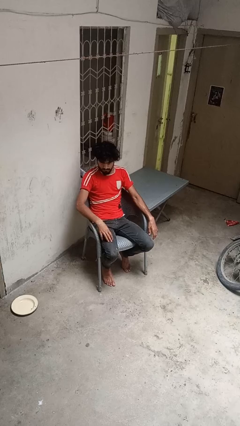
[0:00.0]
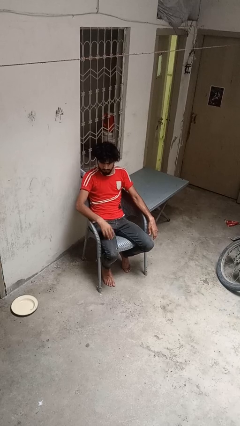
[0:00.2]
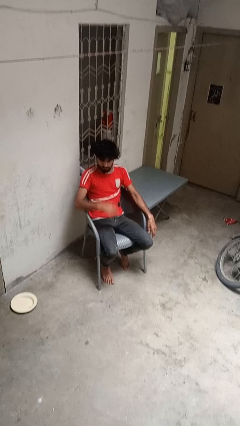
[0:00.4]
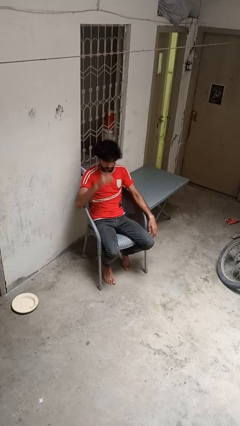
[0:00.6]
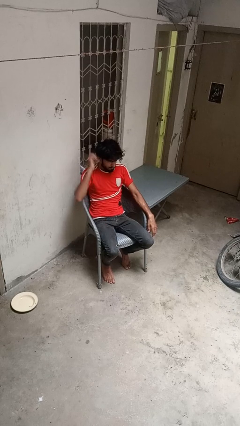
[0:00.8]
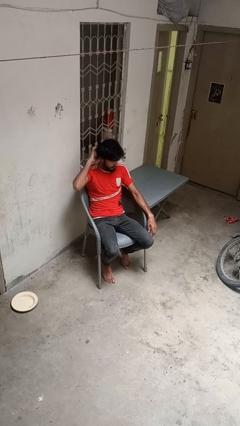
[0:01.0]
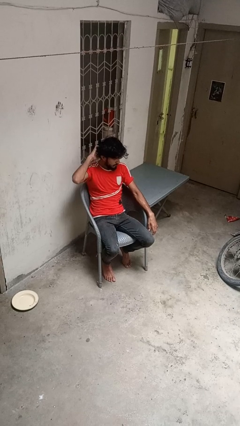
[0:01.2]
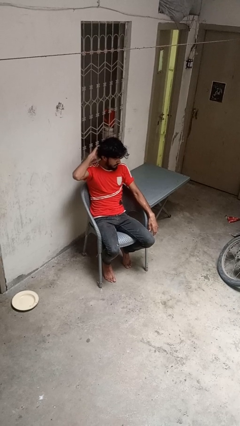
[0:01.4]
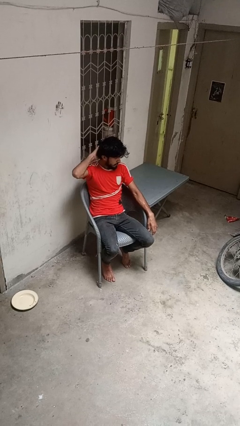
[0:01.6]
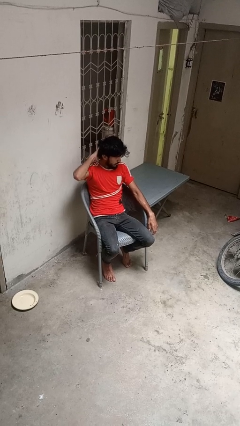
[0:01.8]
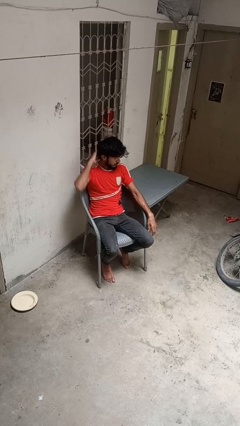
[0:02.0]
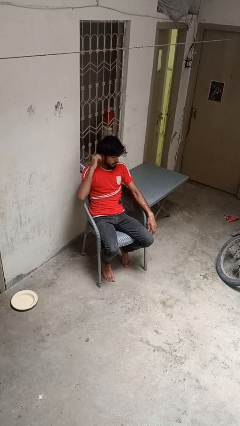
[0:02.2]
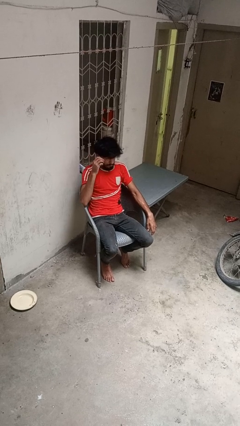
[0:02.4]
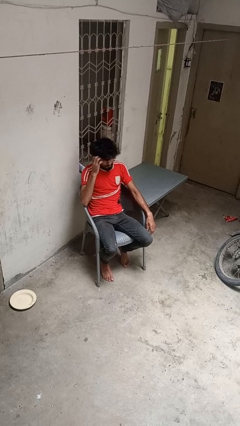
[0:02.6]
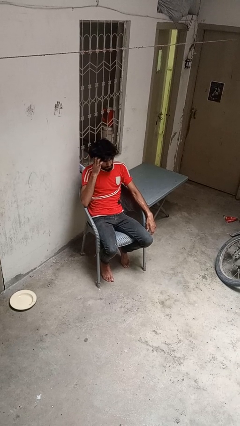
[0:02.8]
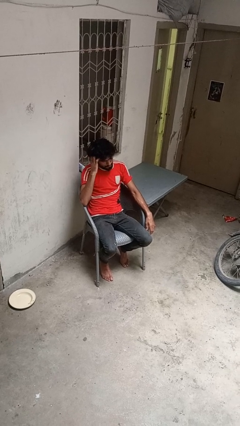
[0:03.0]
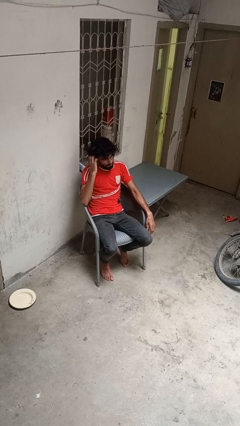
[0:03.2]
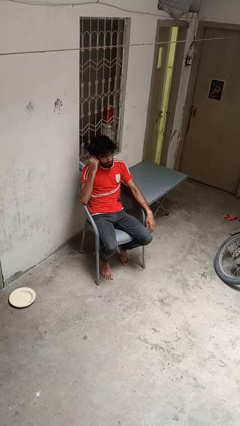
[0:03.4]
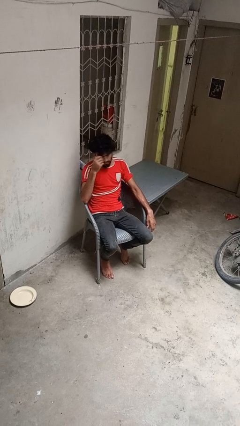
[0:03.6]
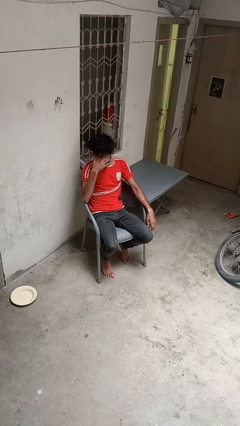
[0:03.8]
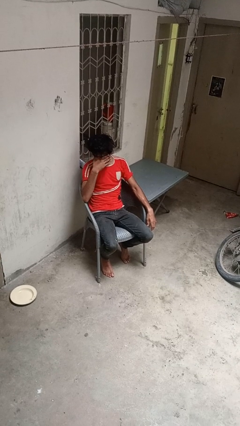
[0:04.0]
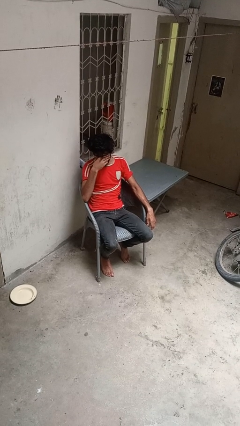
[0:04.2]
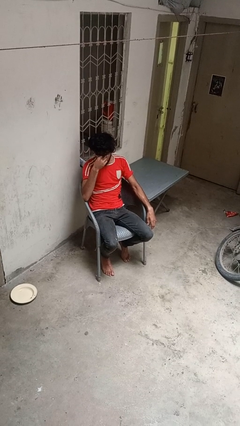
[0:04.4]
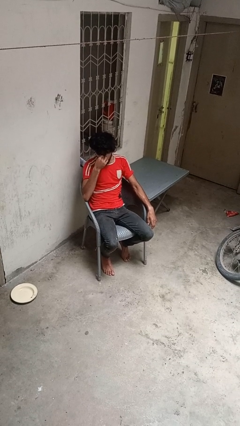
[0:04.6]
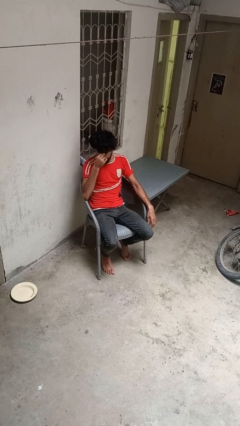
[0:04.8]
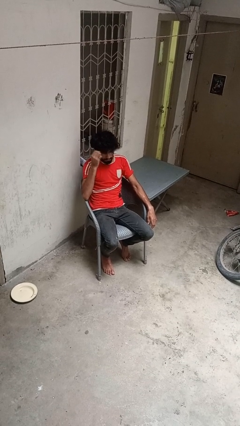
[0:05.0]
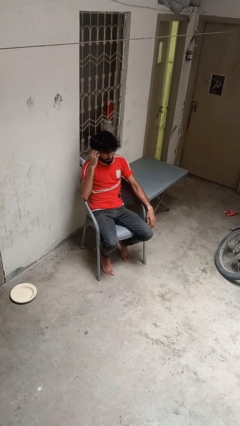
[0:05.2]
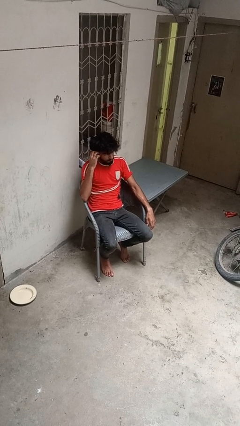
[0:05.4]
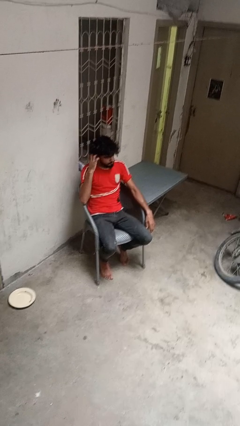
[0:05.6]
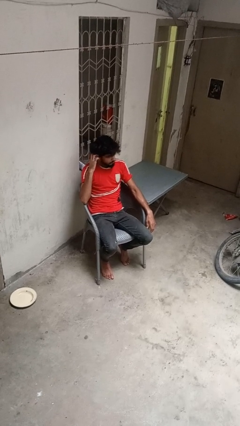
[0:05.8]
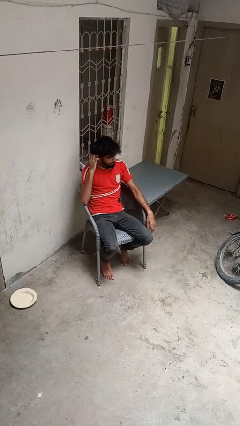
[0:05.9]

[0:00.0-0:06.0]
person strokes hair

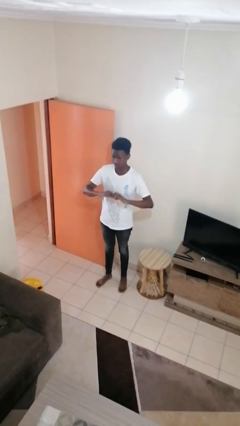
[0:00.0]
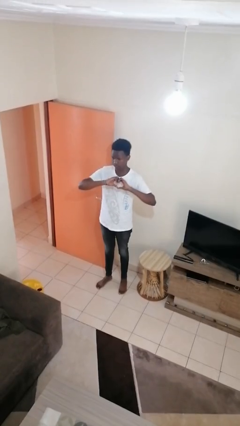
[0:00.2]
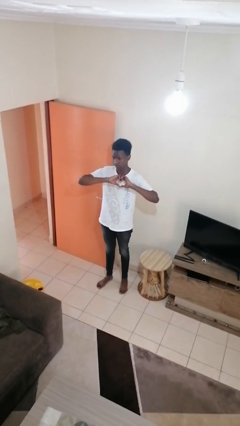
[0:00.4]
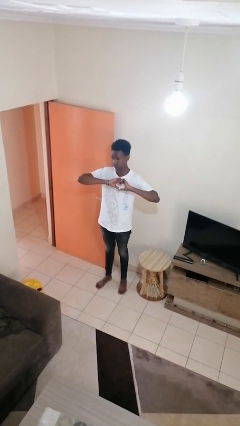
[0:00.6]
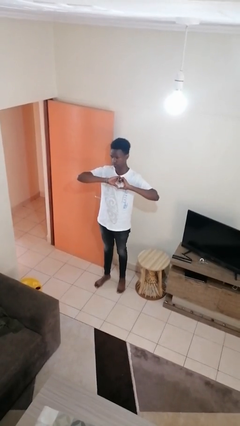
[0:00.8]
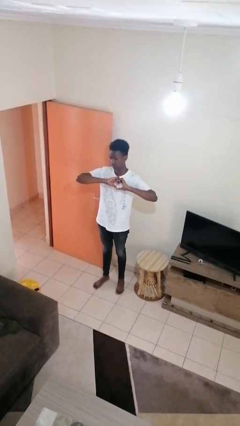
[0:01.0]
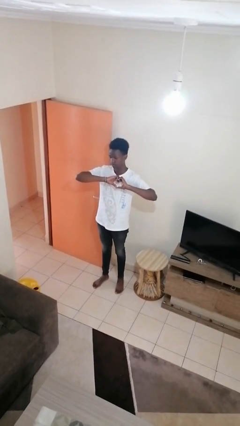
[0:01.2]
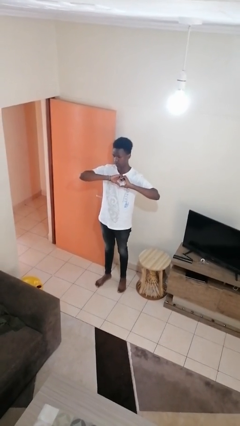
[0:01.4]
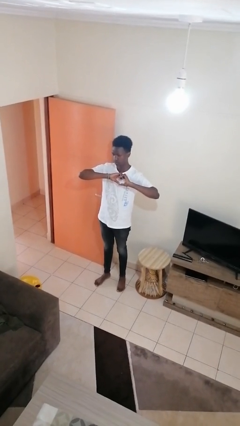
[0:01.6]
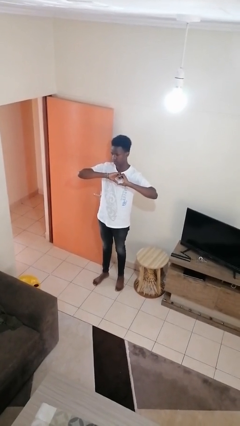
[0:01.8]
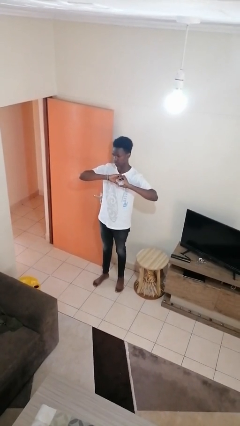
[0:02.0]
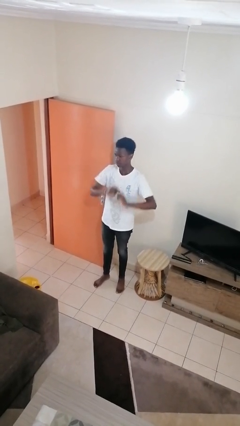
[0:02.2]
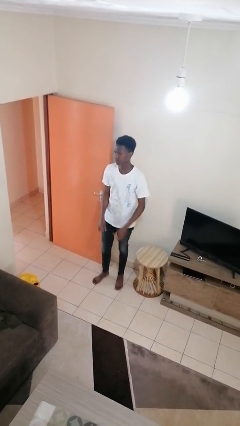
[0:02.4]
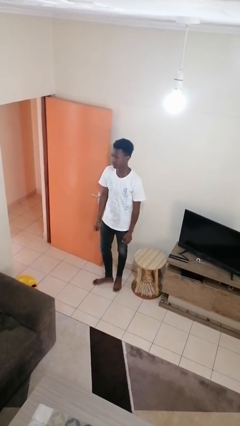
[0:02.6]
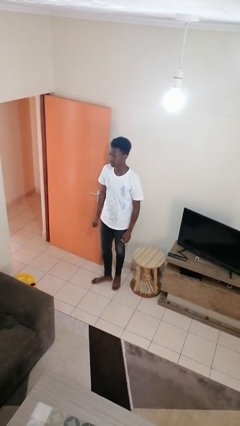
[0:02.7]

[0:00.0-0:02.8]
person gestures heart

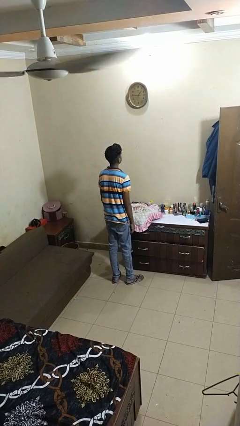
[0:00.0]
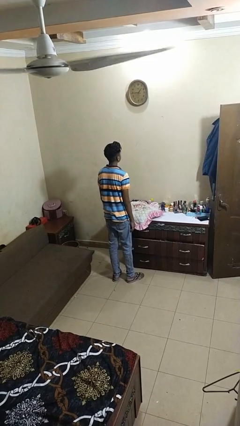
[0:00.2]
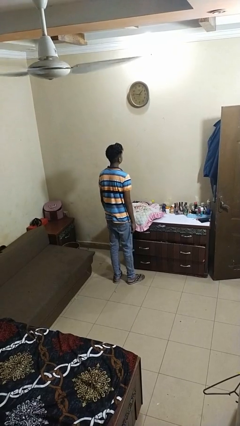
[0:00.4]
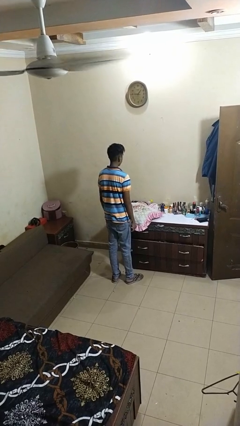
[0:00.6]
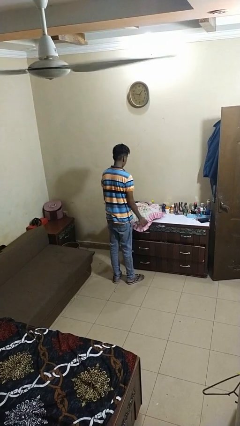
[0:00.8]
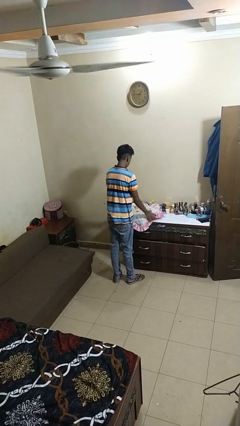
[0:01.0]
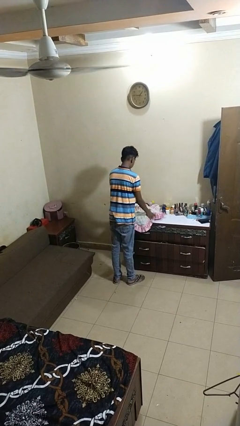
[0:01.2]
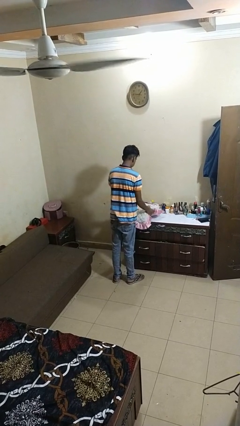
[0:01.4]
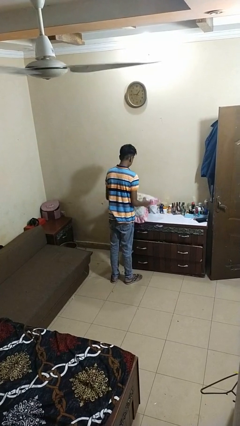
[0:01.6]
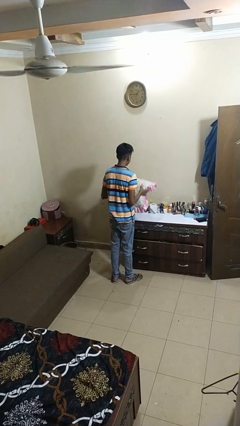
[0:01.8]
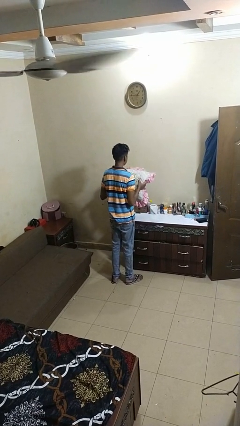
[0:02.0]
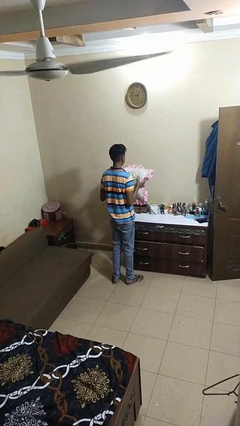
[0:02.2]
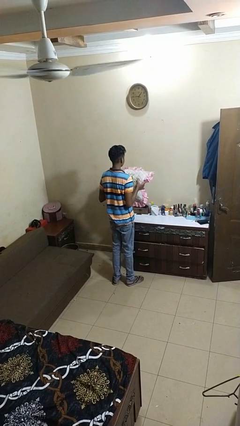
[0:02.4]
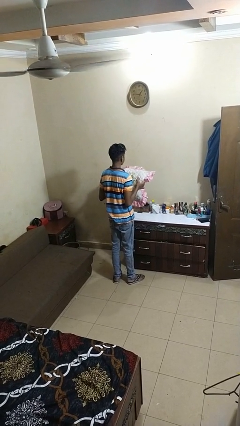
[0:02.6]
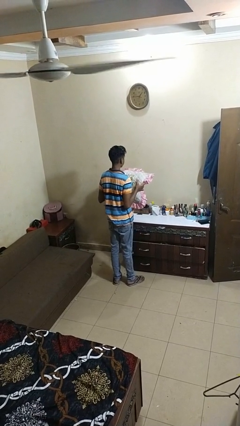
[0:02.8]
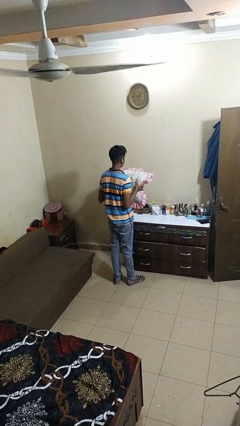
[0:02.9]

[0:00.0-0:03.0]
person picks up object from countertop

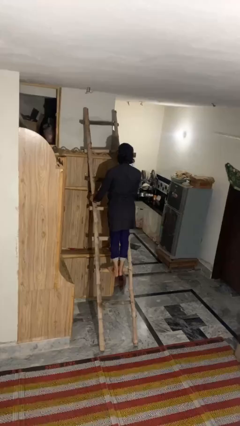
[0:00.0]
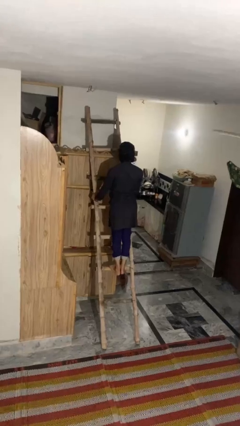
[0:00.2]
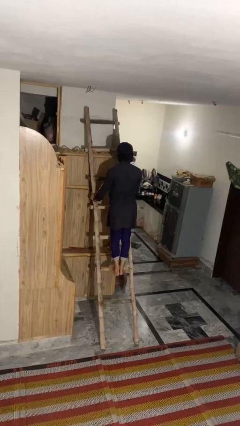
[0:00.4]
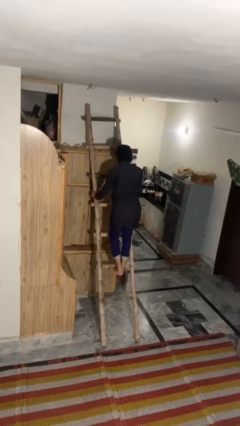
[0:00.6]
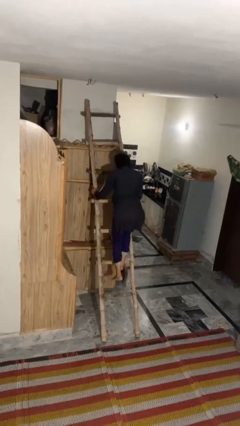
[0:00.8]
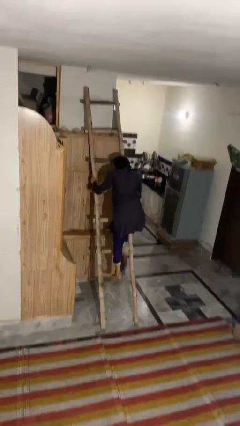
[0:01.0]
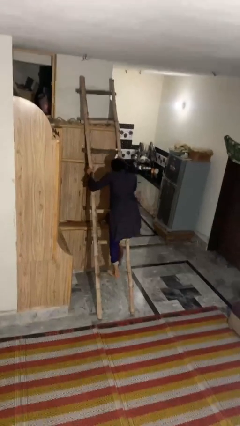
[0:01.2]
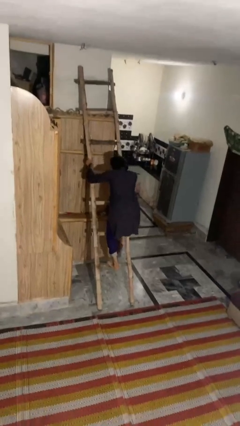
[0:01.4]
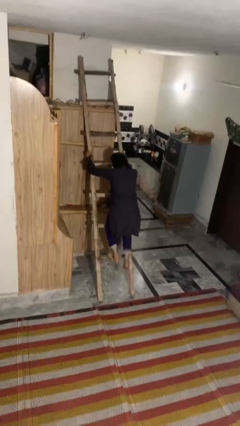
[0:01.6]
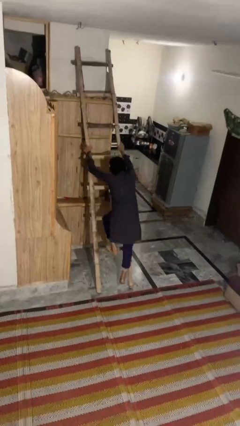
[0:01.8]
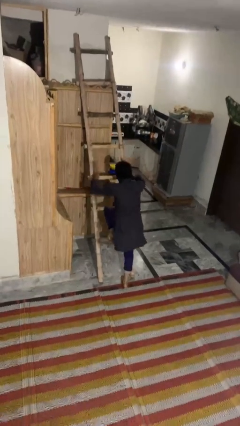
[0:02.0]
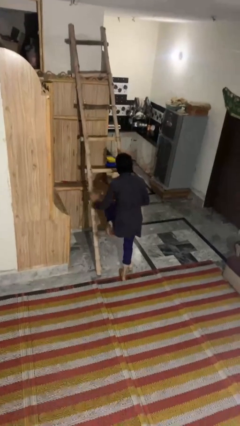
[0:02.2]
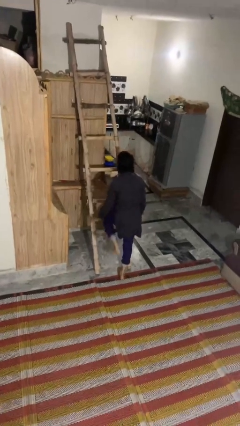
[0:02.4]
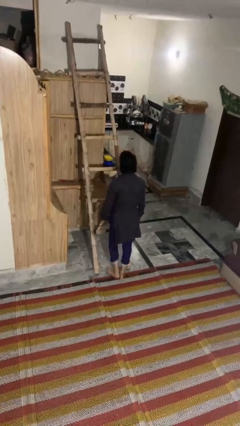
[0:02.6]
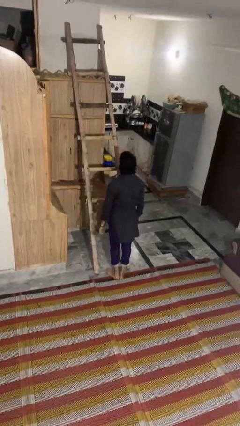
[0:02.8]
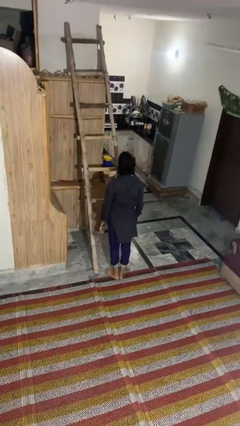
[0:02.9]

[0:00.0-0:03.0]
person climbs down ladder

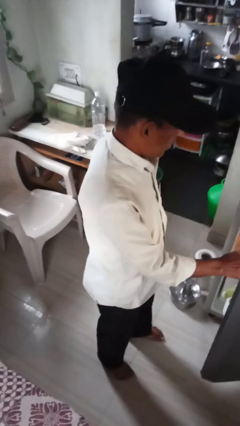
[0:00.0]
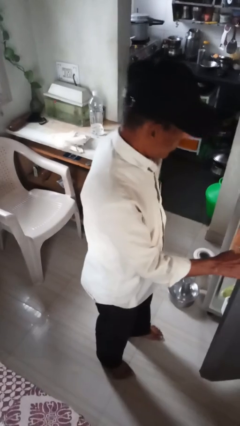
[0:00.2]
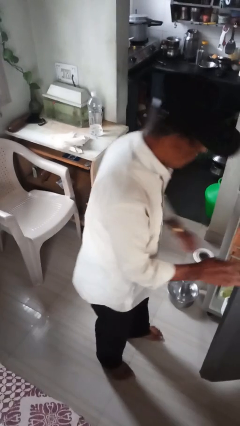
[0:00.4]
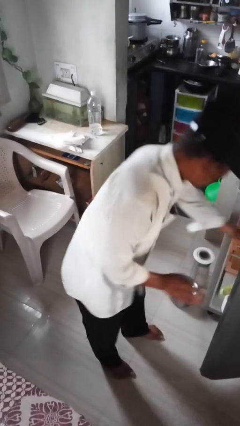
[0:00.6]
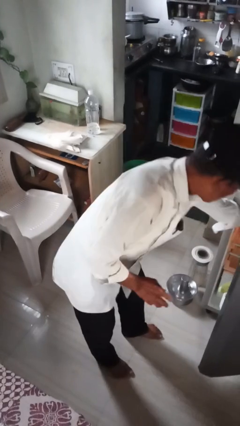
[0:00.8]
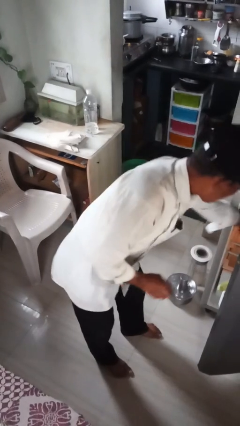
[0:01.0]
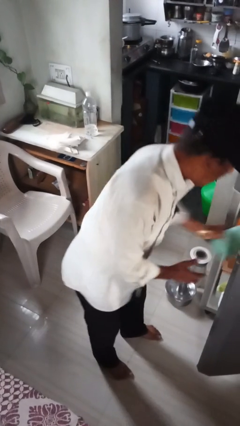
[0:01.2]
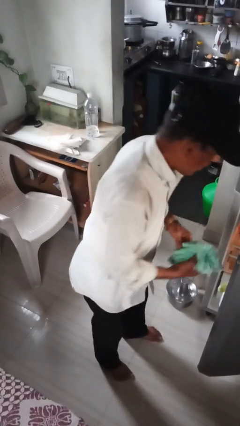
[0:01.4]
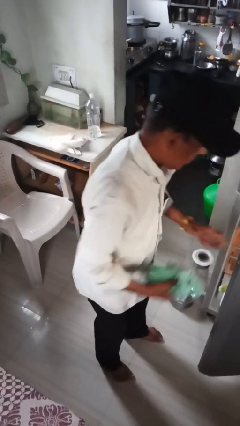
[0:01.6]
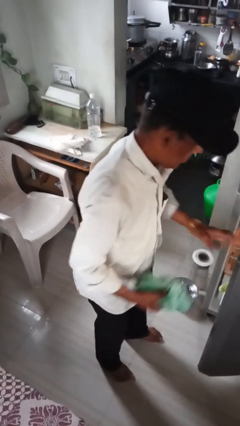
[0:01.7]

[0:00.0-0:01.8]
person unloads clotheswasher

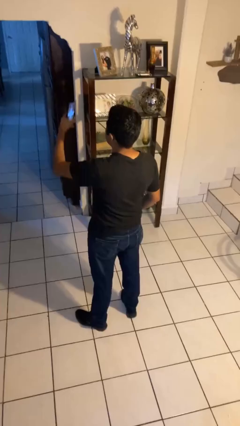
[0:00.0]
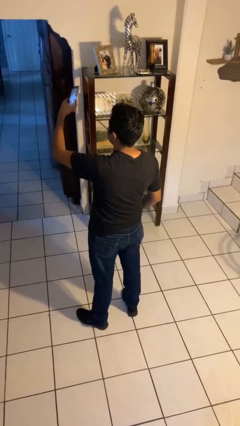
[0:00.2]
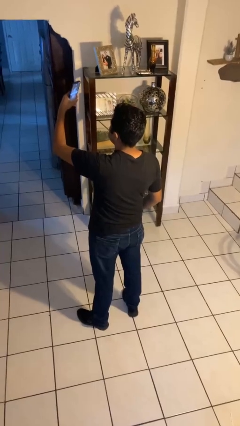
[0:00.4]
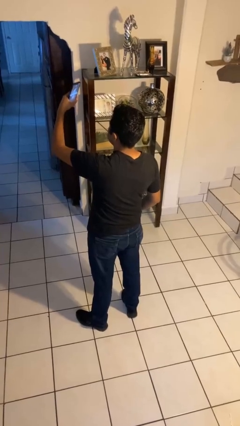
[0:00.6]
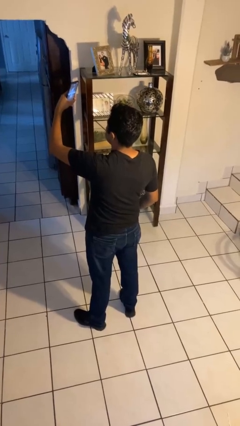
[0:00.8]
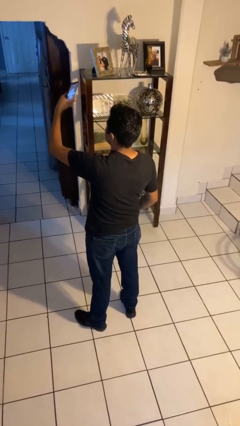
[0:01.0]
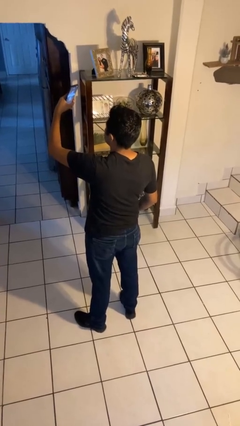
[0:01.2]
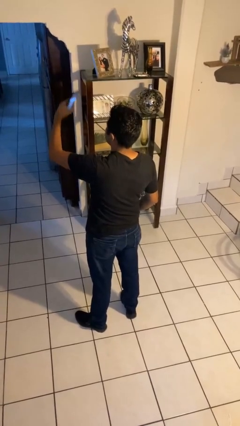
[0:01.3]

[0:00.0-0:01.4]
person takes selfie
